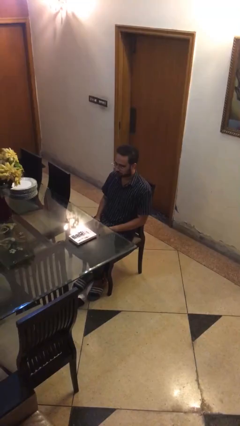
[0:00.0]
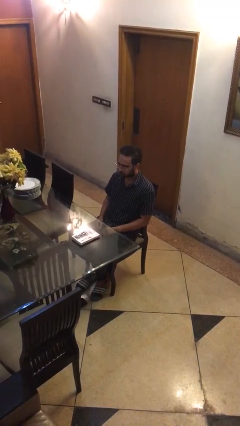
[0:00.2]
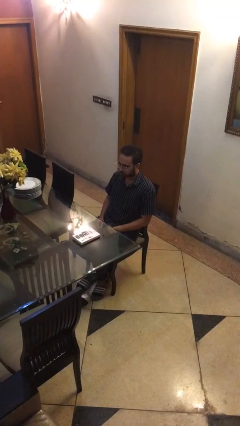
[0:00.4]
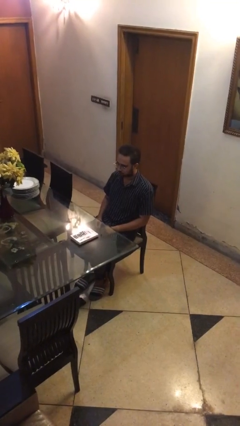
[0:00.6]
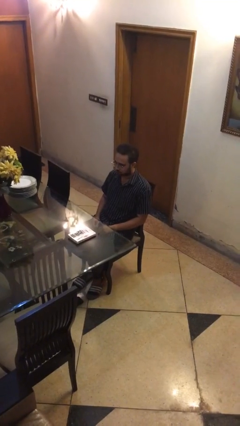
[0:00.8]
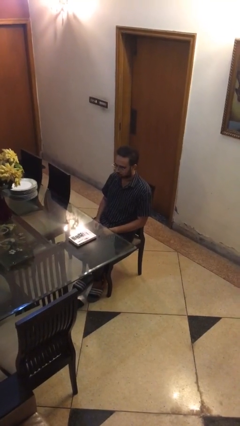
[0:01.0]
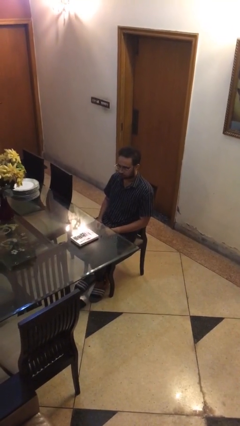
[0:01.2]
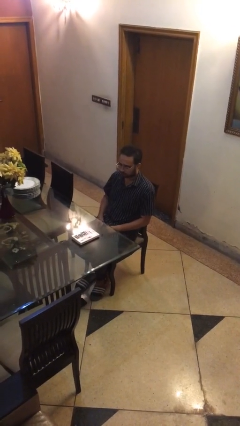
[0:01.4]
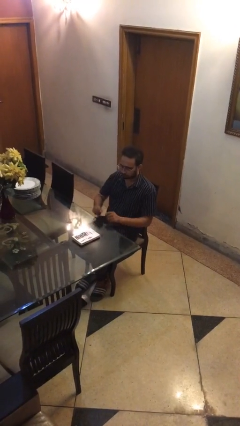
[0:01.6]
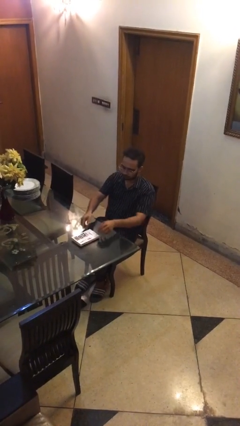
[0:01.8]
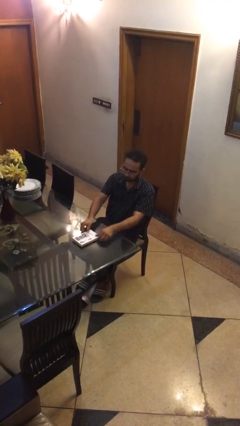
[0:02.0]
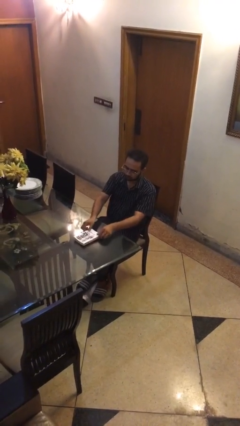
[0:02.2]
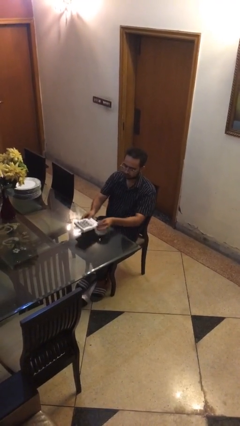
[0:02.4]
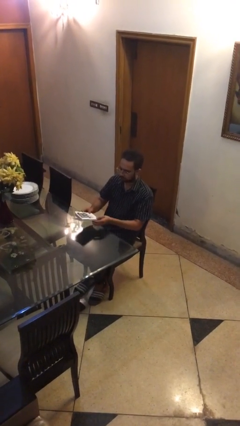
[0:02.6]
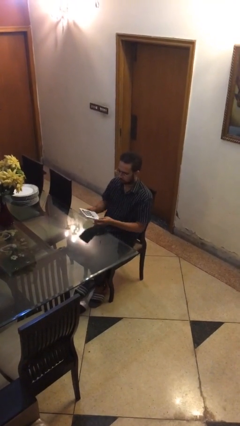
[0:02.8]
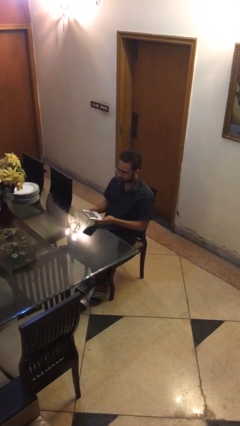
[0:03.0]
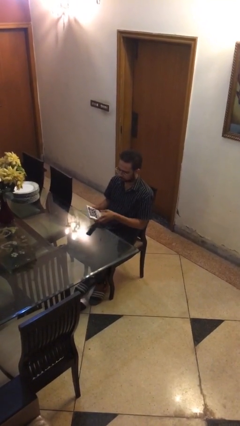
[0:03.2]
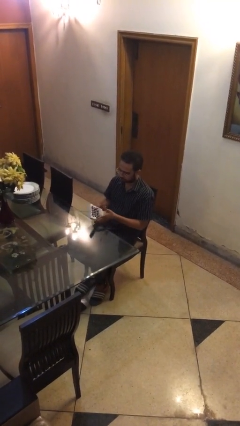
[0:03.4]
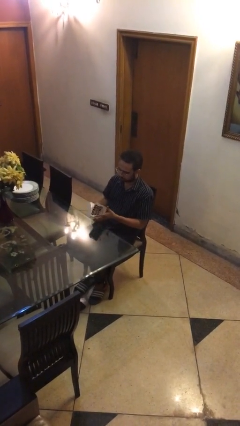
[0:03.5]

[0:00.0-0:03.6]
person picks up object from table

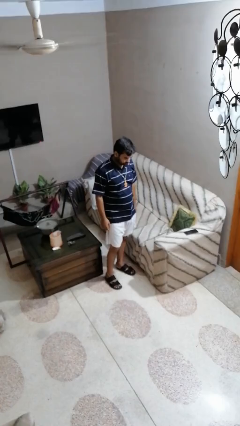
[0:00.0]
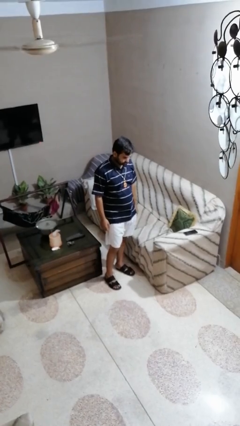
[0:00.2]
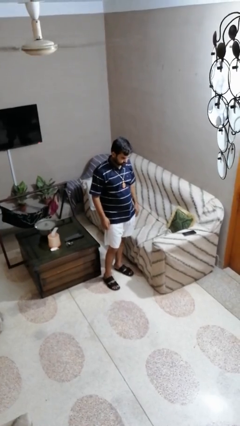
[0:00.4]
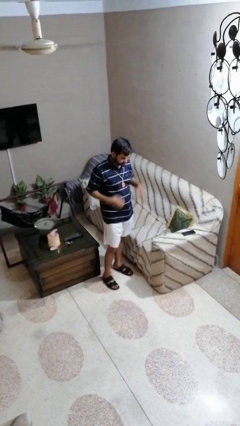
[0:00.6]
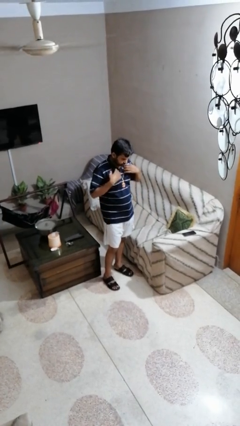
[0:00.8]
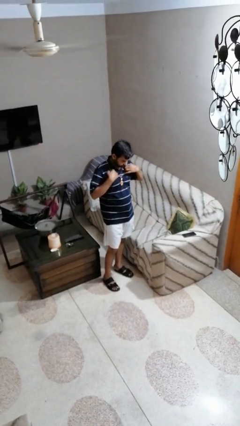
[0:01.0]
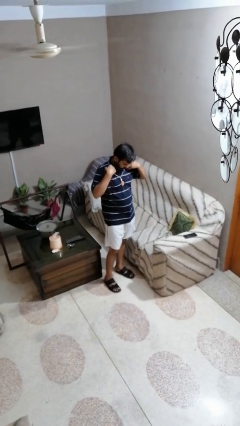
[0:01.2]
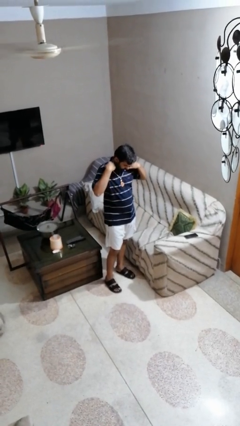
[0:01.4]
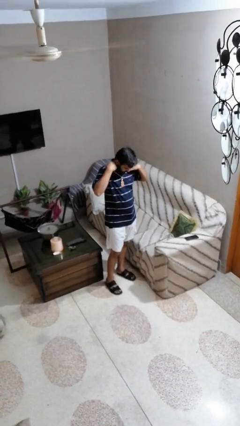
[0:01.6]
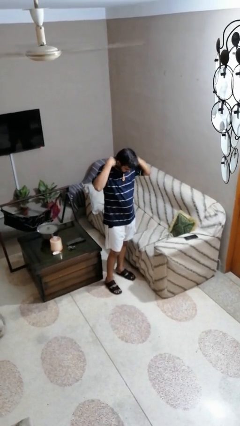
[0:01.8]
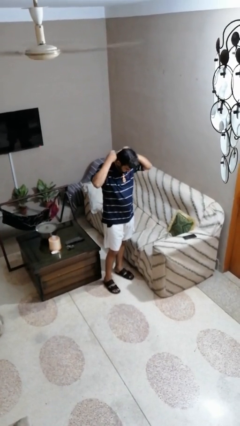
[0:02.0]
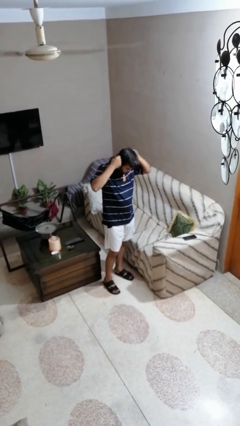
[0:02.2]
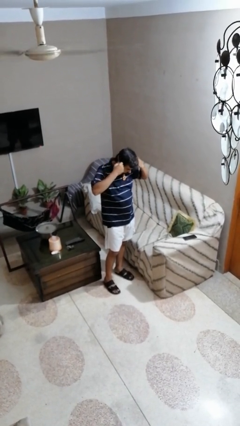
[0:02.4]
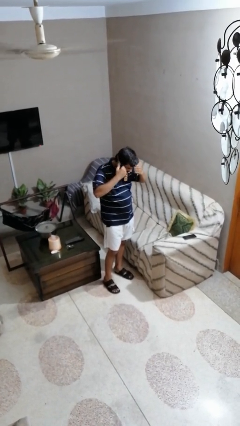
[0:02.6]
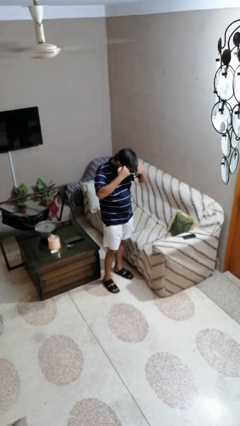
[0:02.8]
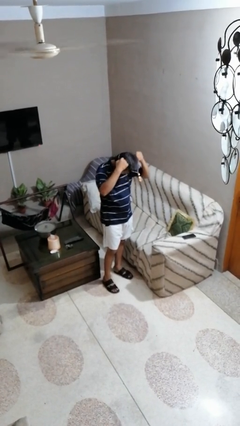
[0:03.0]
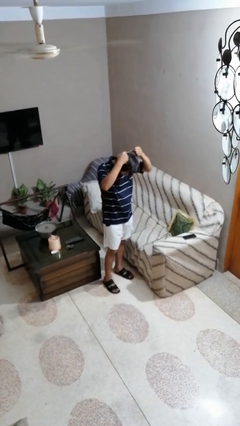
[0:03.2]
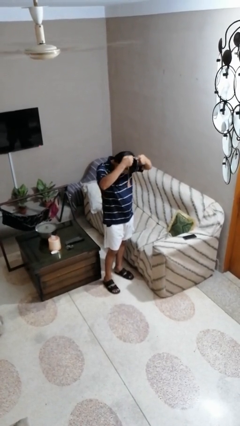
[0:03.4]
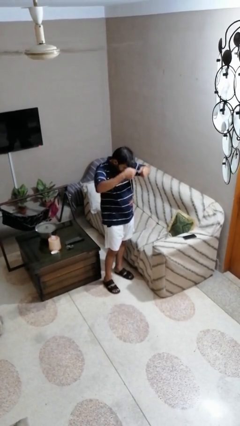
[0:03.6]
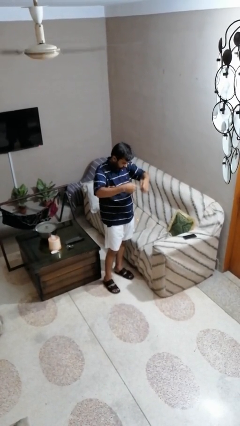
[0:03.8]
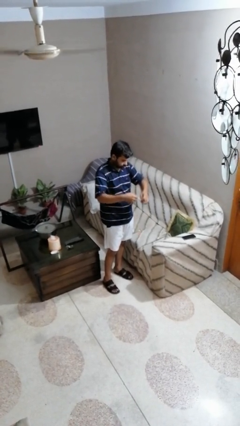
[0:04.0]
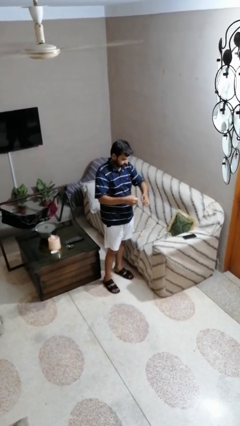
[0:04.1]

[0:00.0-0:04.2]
person takes off necklace

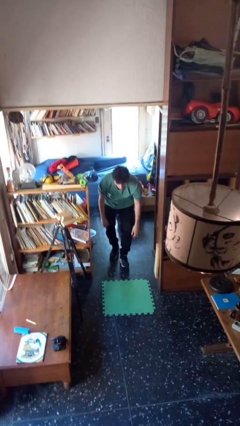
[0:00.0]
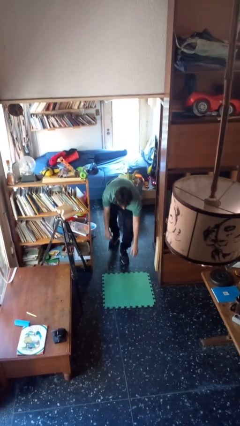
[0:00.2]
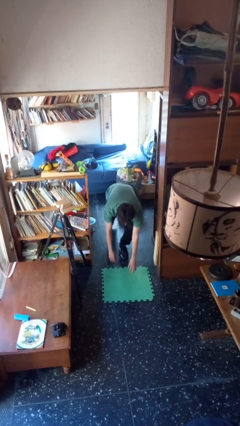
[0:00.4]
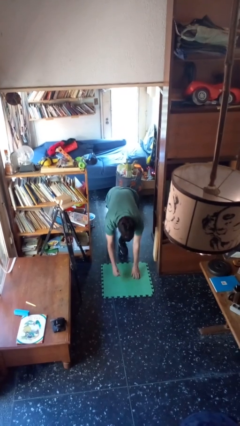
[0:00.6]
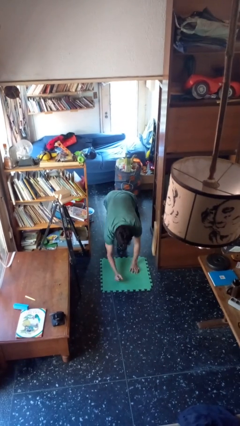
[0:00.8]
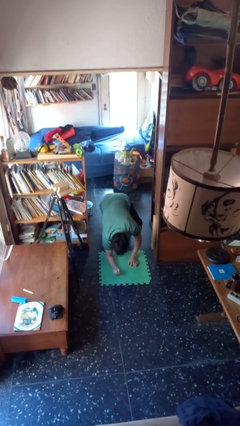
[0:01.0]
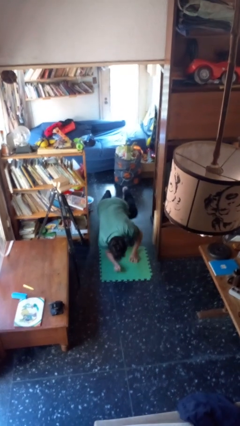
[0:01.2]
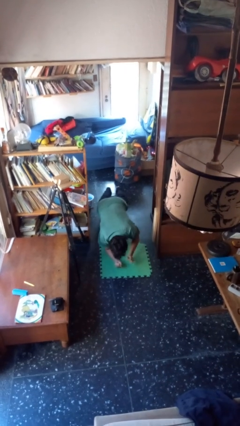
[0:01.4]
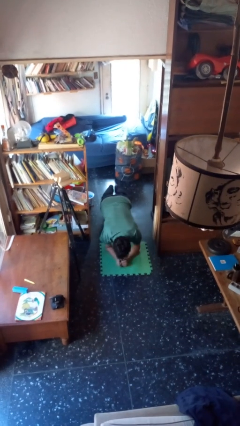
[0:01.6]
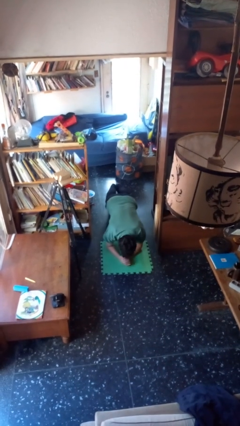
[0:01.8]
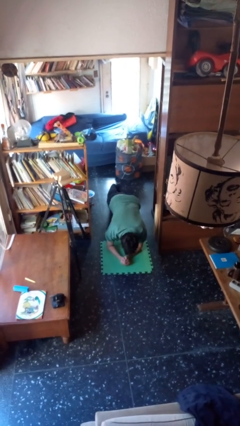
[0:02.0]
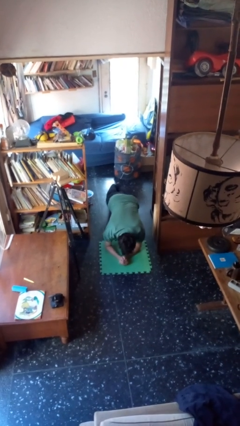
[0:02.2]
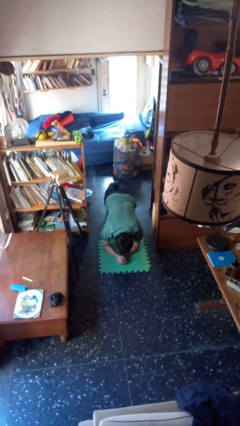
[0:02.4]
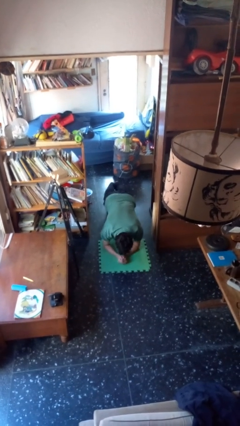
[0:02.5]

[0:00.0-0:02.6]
person exercises with plank

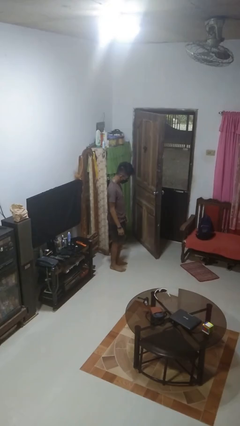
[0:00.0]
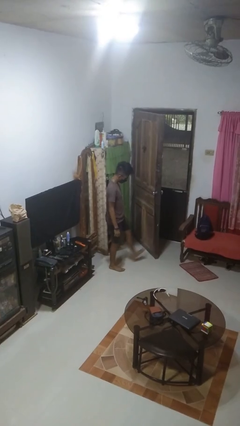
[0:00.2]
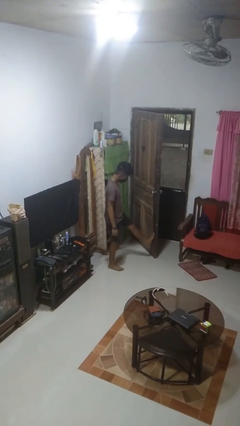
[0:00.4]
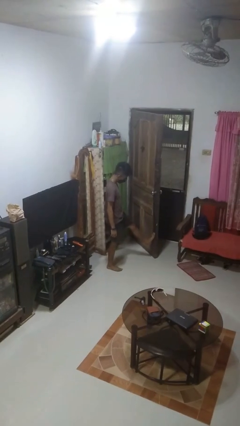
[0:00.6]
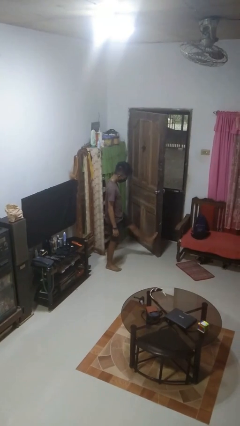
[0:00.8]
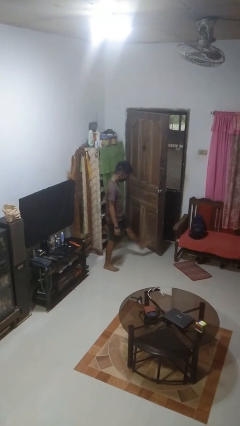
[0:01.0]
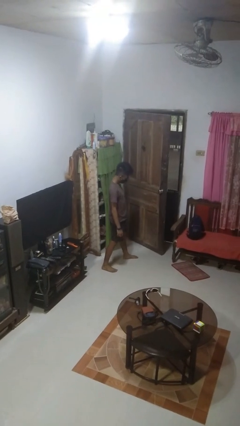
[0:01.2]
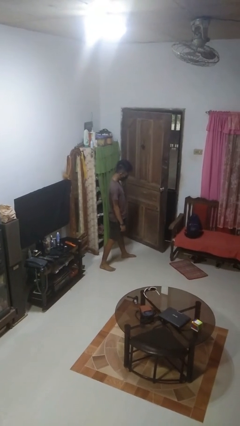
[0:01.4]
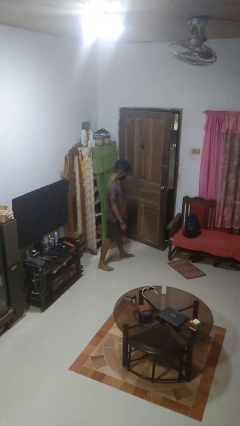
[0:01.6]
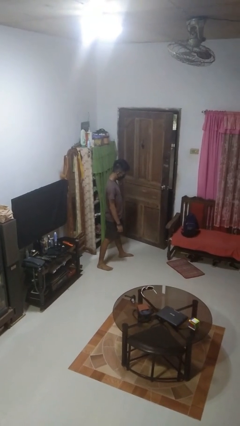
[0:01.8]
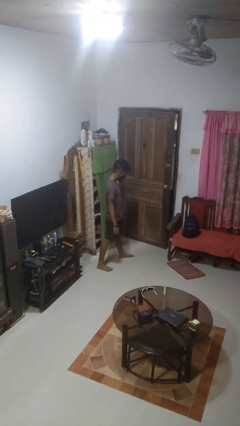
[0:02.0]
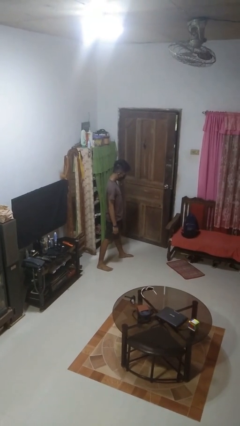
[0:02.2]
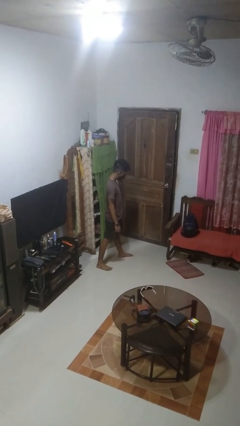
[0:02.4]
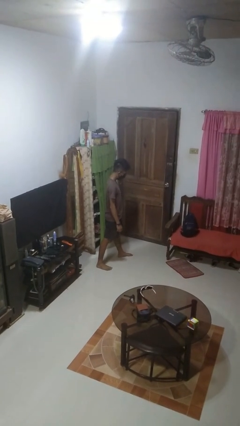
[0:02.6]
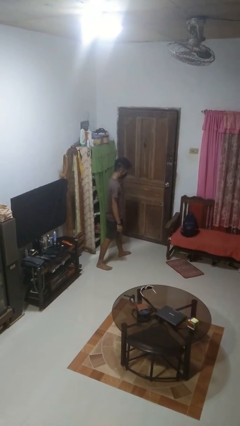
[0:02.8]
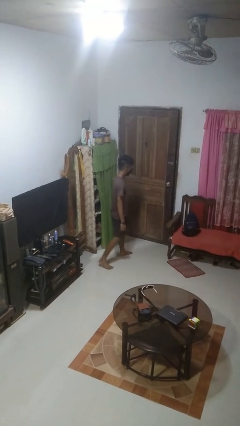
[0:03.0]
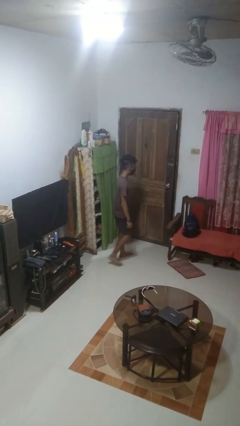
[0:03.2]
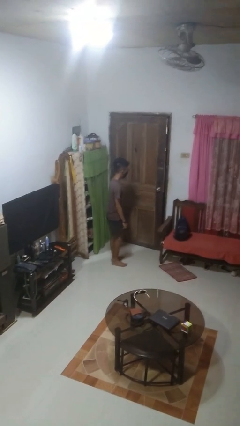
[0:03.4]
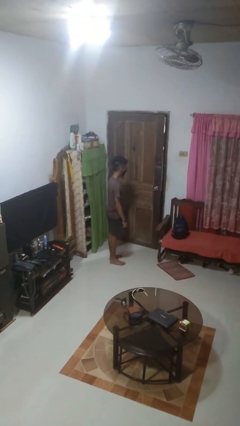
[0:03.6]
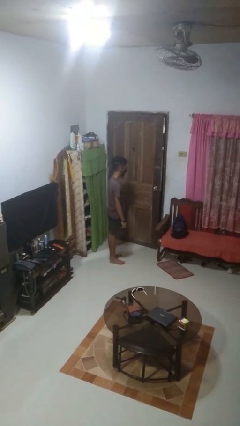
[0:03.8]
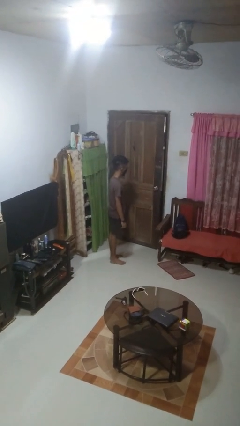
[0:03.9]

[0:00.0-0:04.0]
person closes door with foot

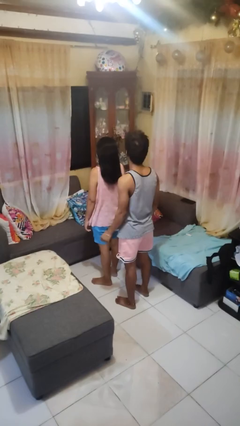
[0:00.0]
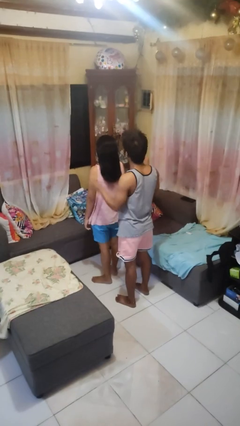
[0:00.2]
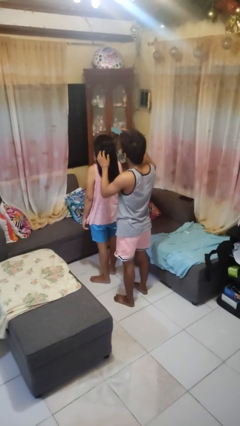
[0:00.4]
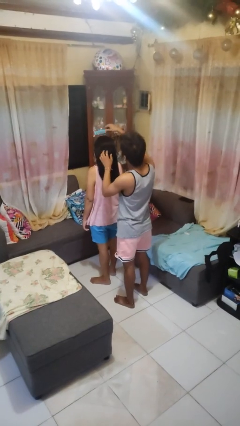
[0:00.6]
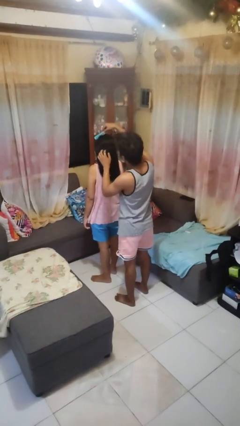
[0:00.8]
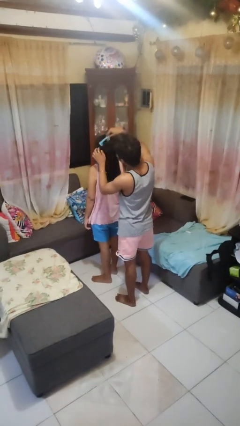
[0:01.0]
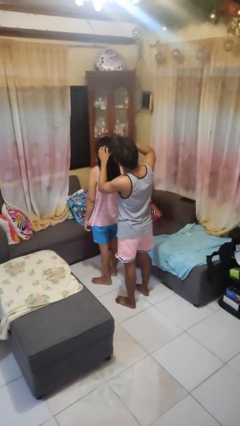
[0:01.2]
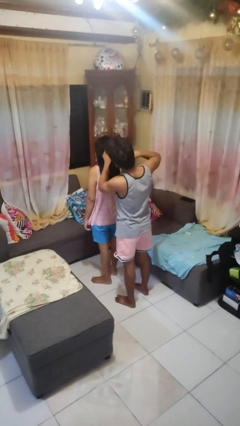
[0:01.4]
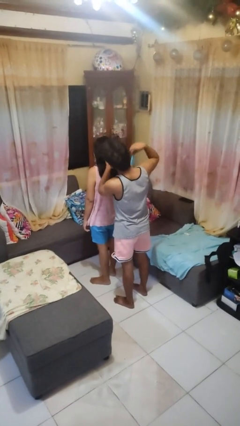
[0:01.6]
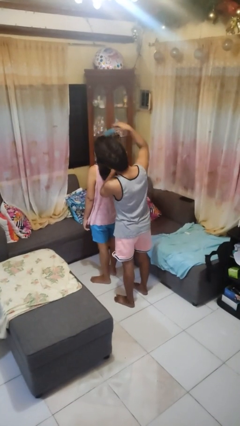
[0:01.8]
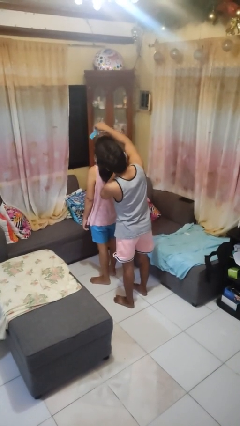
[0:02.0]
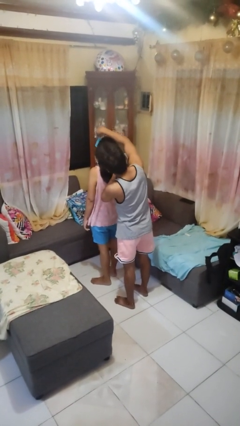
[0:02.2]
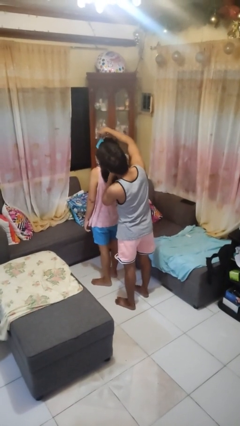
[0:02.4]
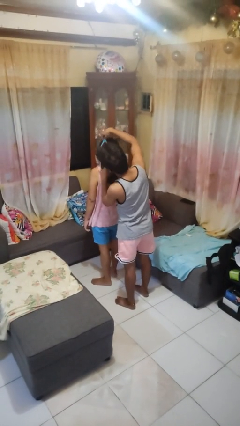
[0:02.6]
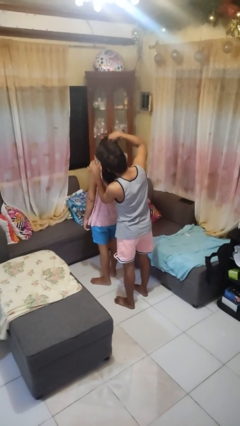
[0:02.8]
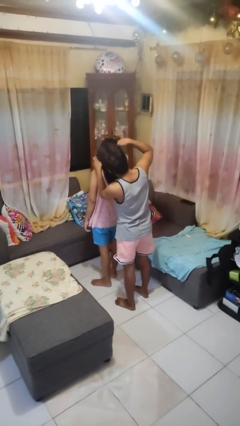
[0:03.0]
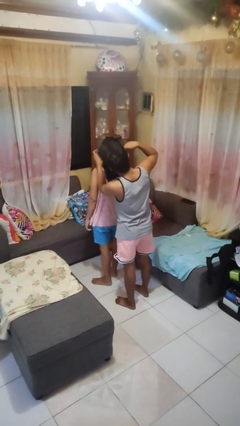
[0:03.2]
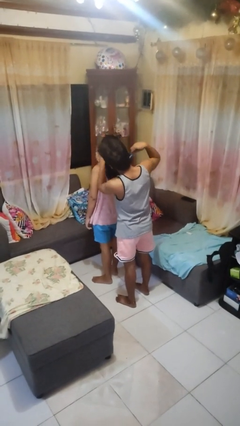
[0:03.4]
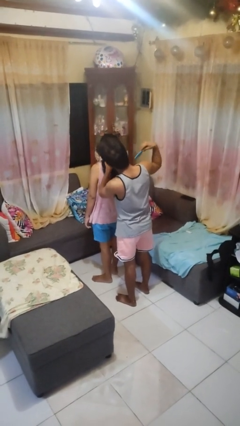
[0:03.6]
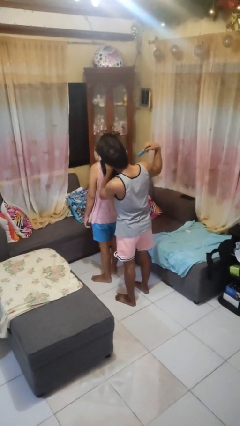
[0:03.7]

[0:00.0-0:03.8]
person brushes hair of person
